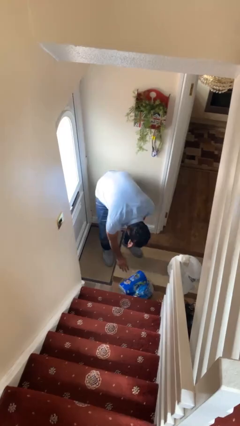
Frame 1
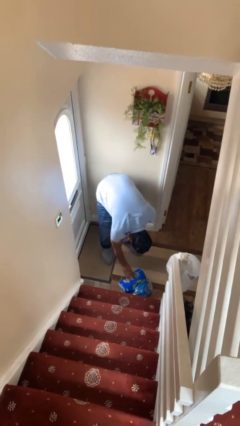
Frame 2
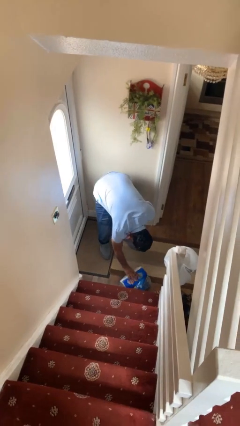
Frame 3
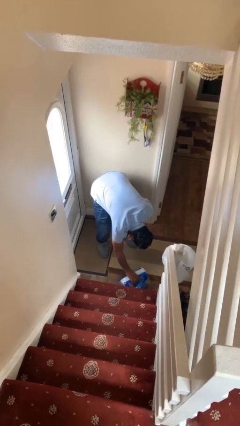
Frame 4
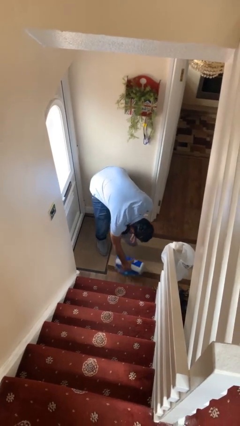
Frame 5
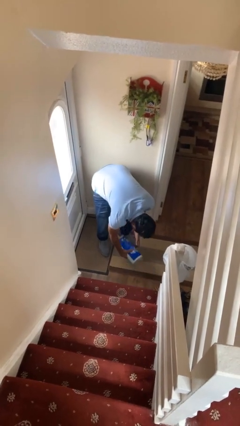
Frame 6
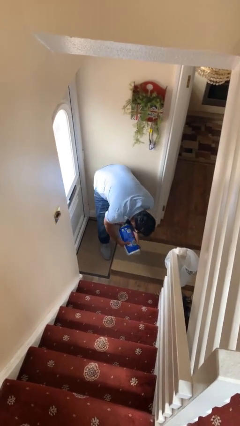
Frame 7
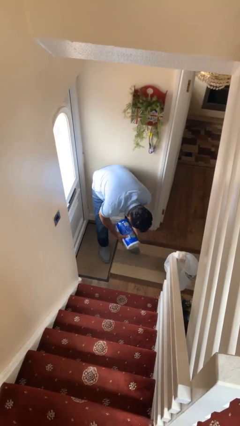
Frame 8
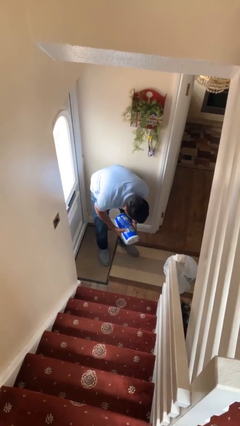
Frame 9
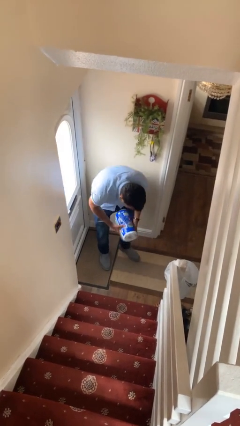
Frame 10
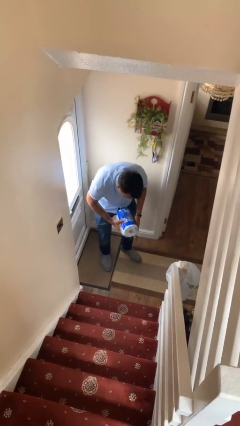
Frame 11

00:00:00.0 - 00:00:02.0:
person picks up object from floor

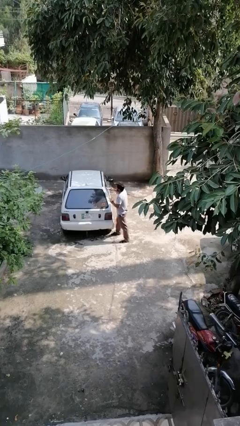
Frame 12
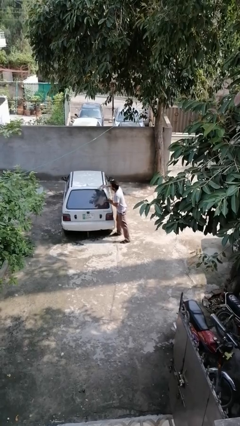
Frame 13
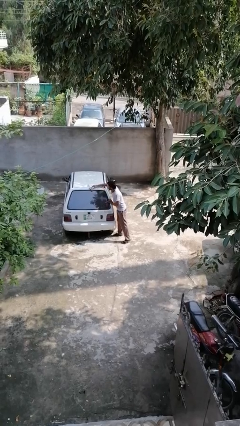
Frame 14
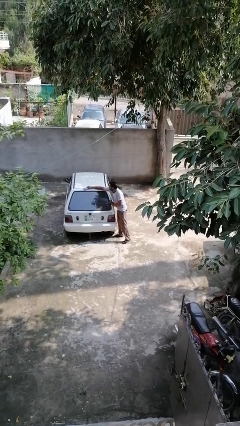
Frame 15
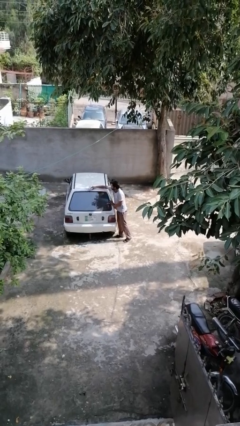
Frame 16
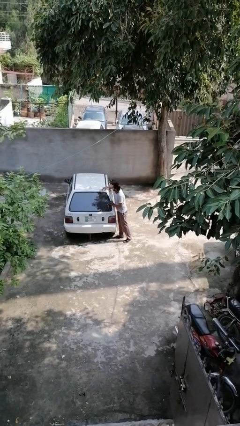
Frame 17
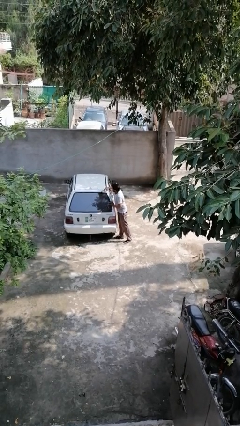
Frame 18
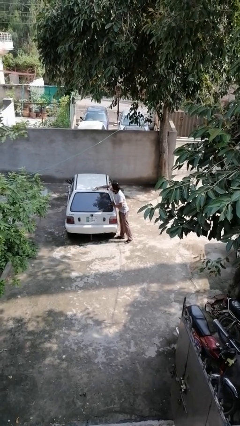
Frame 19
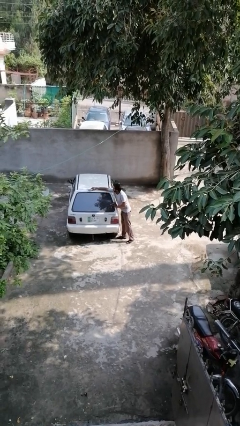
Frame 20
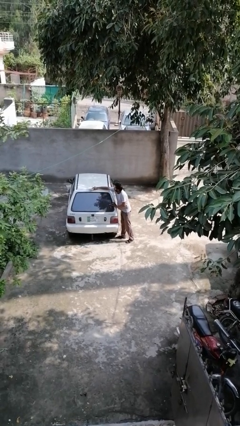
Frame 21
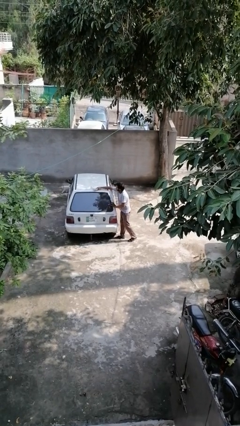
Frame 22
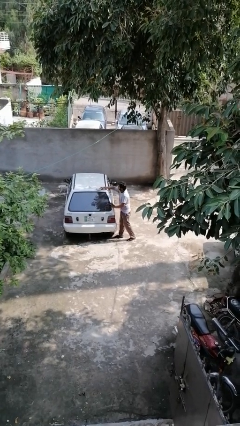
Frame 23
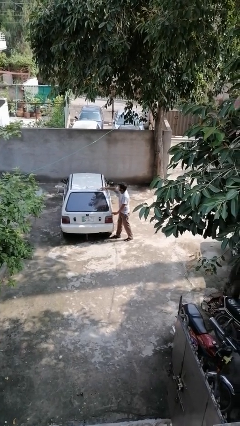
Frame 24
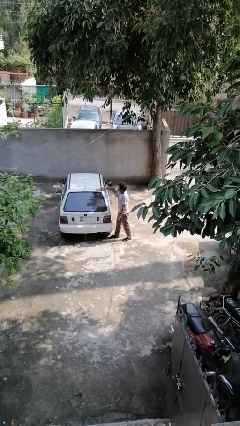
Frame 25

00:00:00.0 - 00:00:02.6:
person polishes car with rag

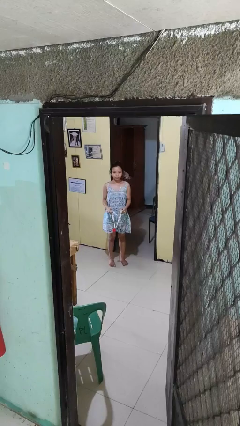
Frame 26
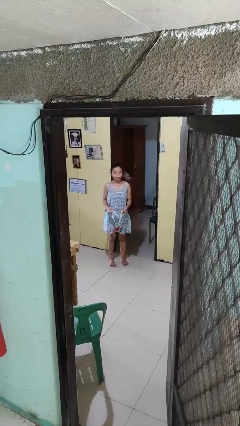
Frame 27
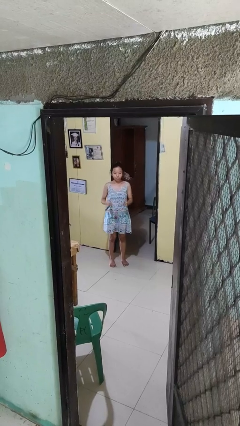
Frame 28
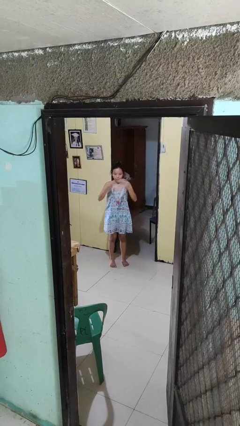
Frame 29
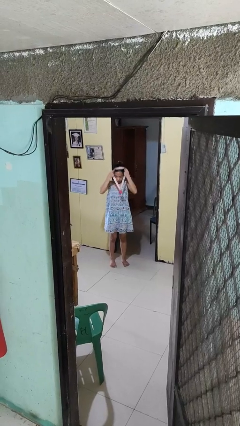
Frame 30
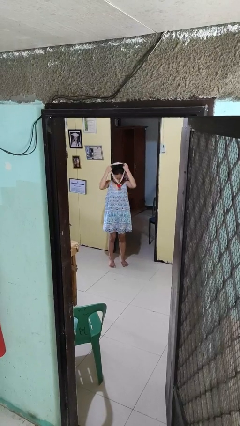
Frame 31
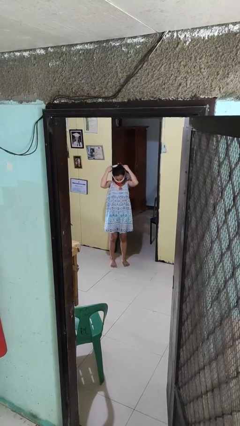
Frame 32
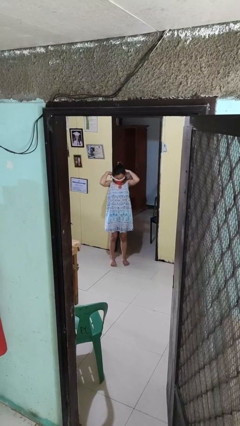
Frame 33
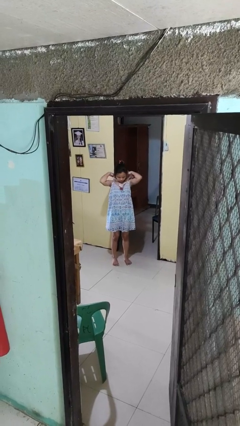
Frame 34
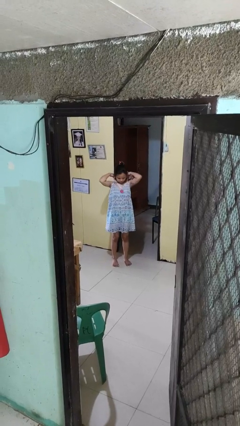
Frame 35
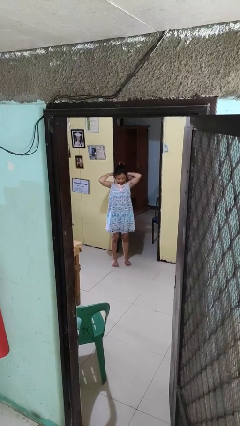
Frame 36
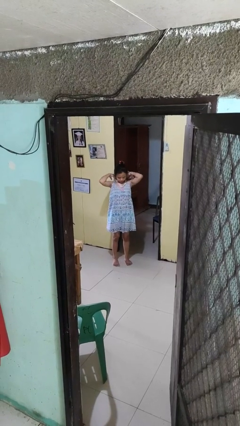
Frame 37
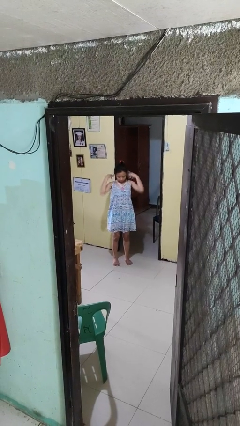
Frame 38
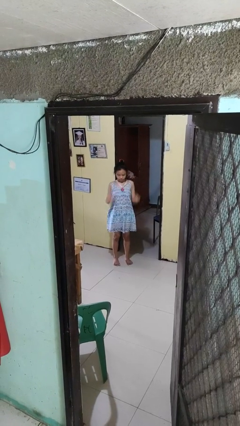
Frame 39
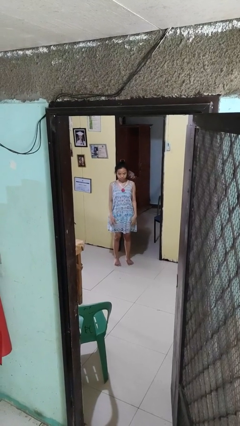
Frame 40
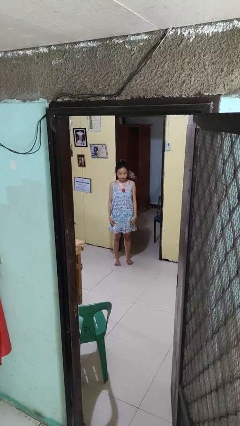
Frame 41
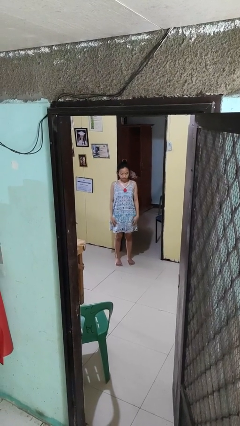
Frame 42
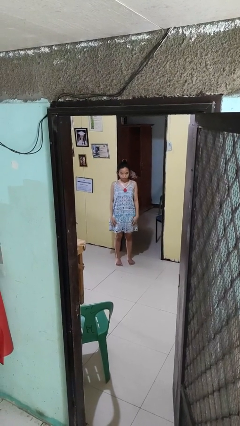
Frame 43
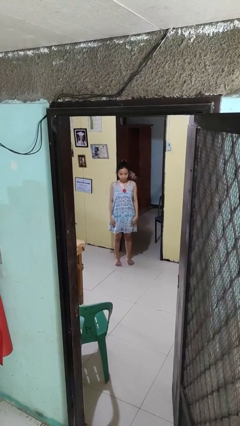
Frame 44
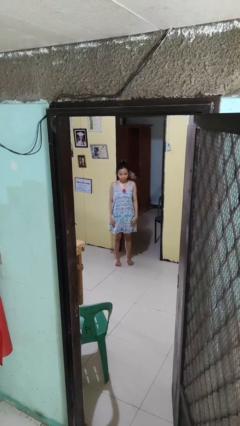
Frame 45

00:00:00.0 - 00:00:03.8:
person puts on necklace

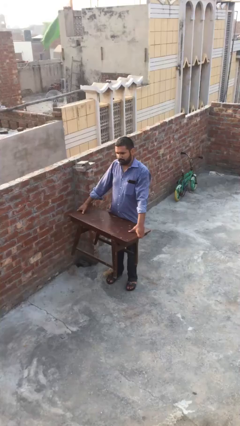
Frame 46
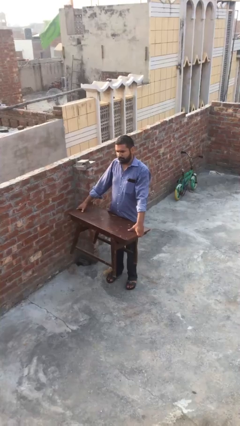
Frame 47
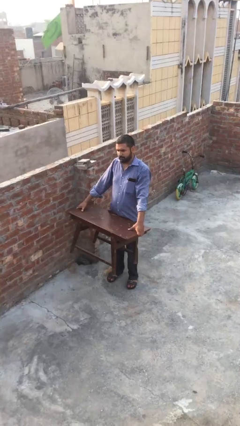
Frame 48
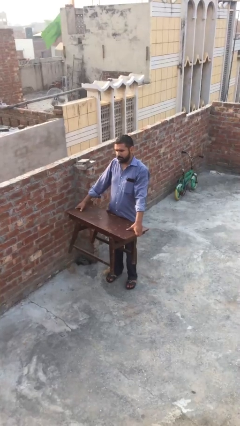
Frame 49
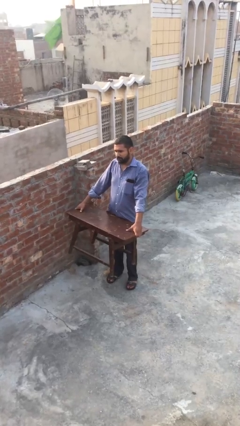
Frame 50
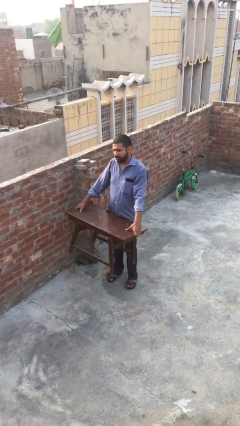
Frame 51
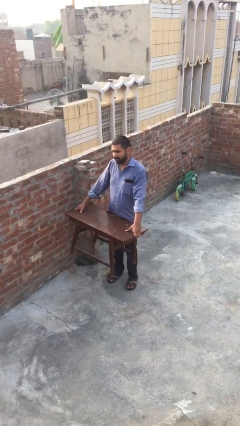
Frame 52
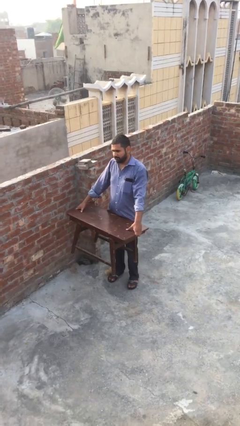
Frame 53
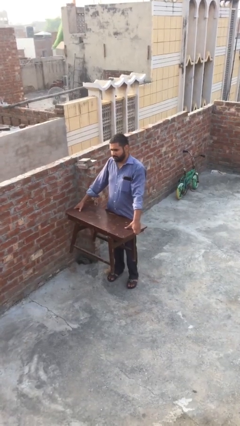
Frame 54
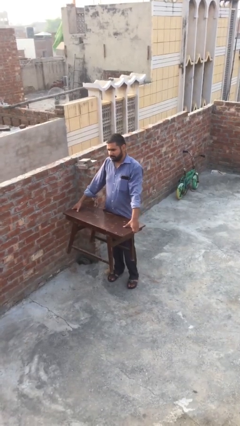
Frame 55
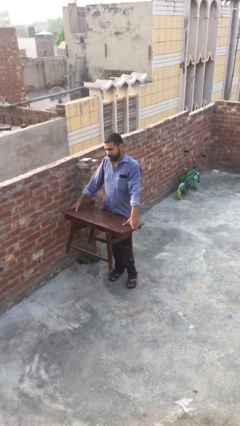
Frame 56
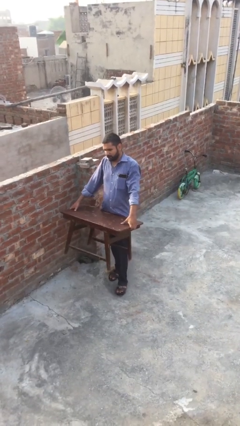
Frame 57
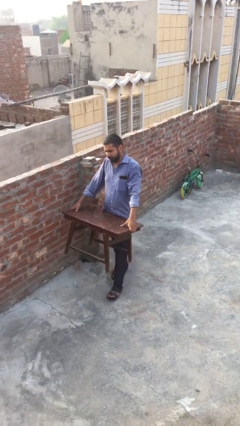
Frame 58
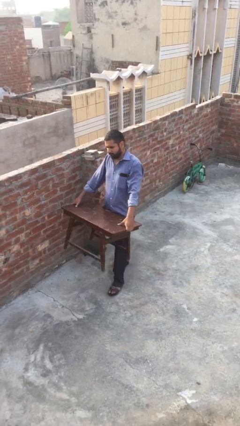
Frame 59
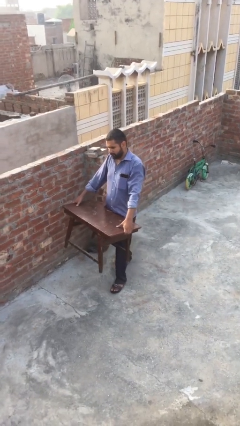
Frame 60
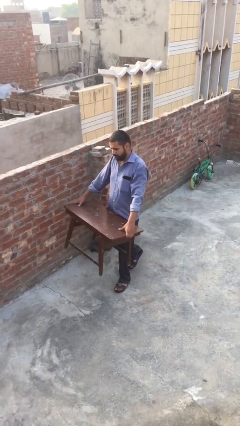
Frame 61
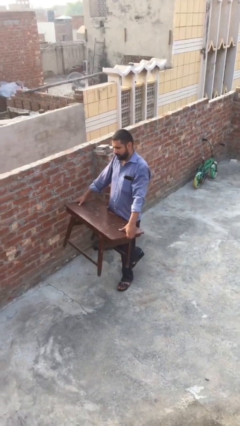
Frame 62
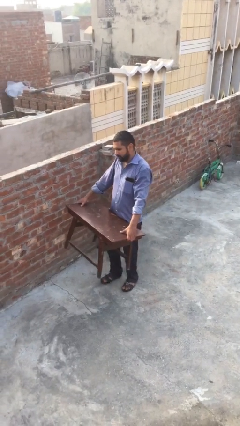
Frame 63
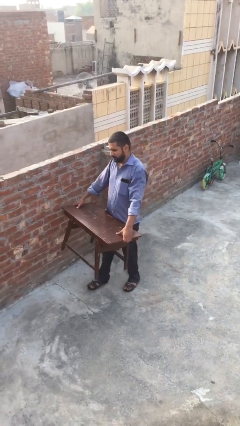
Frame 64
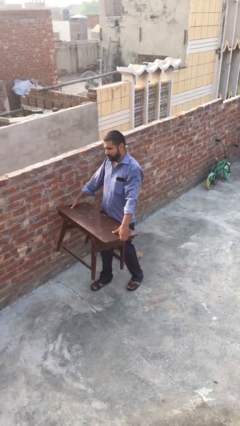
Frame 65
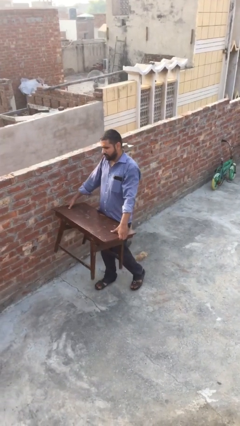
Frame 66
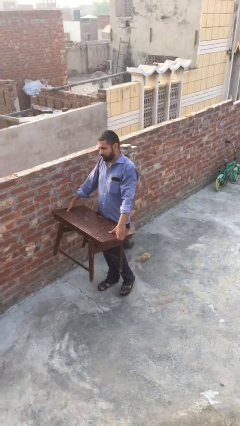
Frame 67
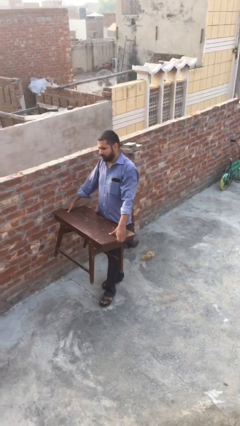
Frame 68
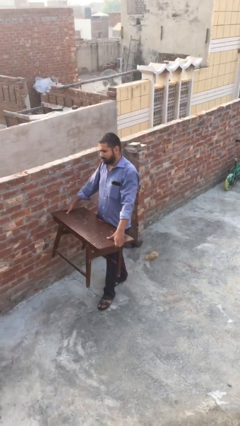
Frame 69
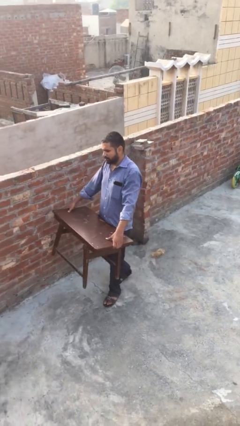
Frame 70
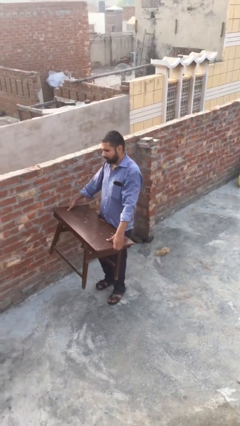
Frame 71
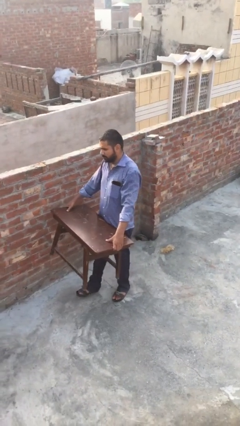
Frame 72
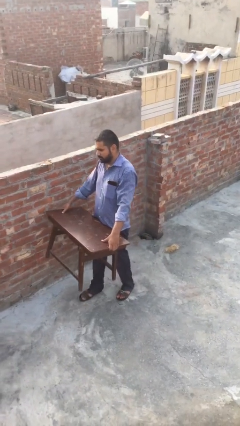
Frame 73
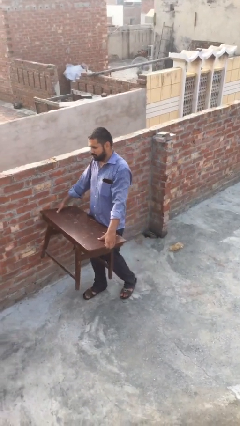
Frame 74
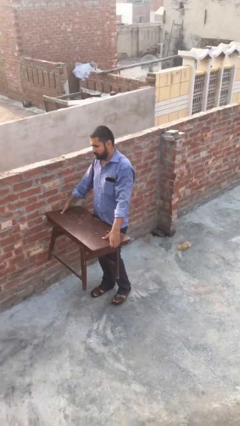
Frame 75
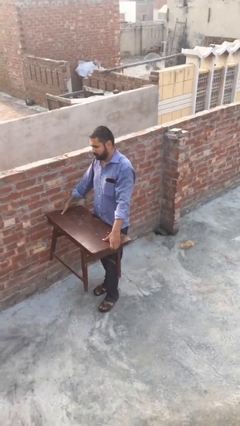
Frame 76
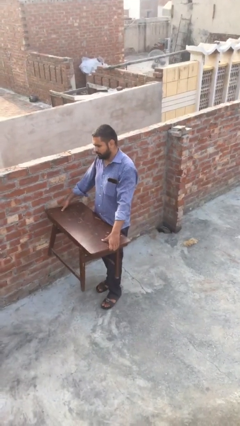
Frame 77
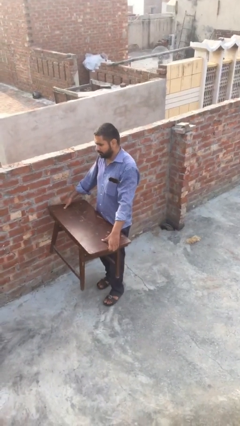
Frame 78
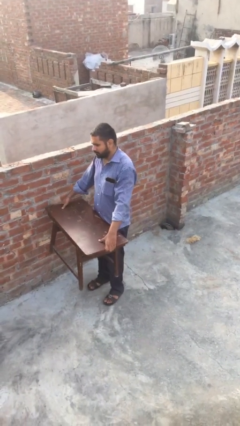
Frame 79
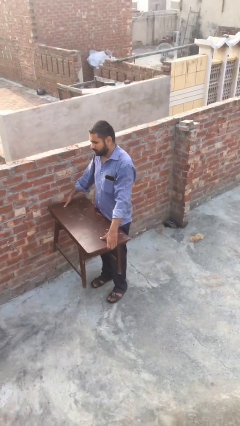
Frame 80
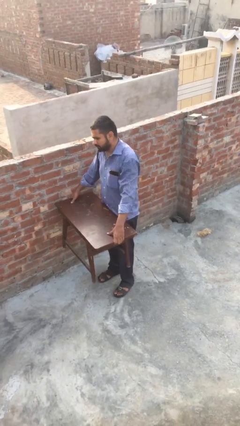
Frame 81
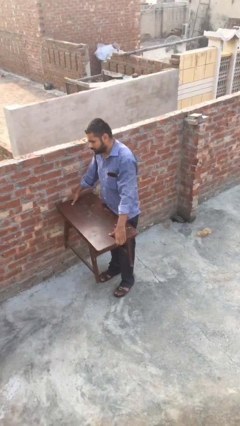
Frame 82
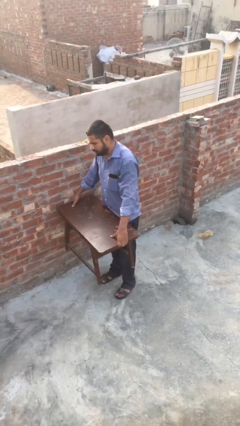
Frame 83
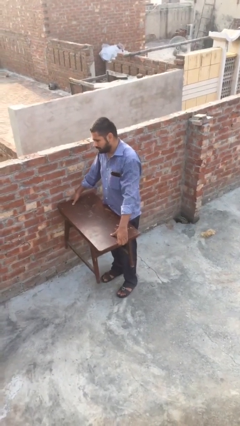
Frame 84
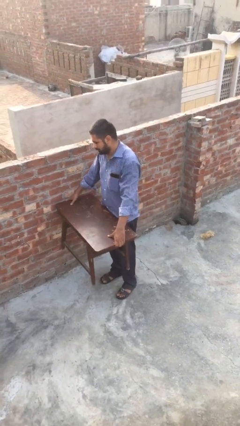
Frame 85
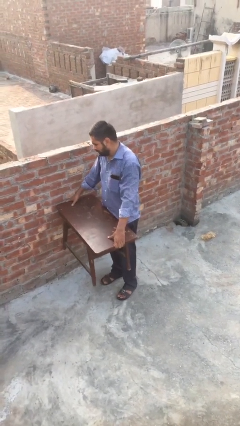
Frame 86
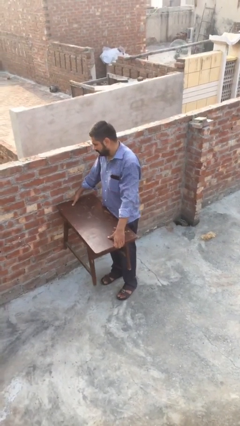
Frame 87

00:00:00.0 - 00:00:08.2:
person carries heavy object

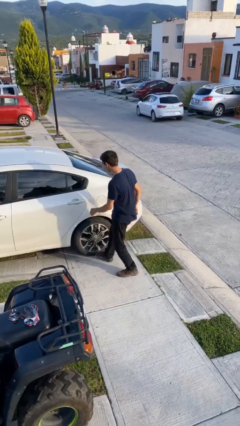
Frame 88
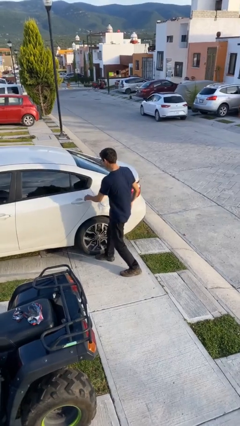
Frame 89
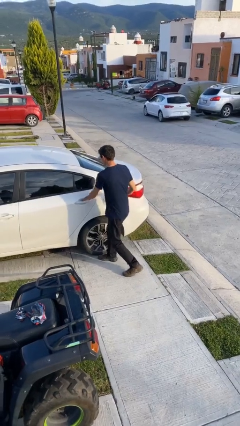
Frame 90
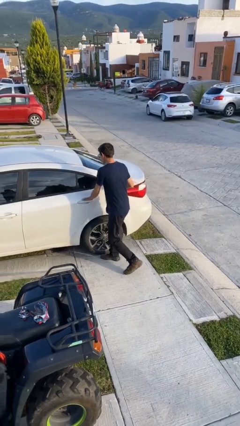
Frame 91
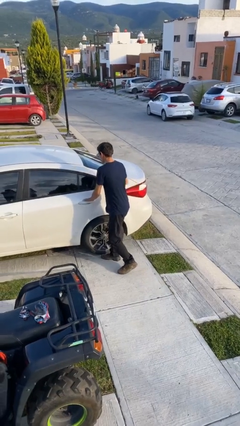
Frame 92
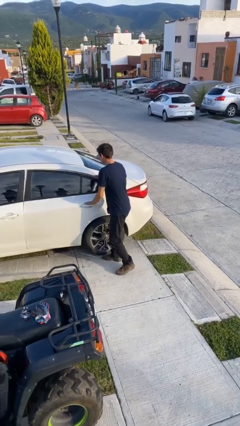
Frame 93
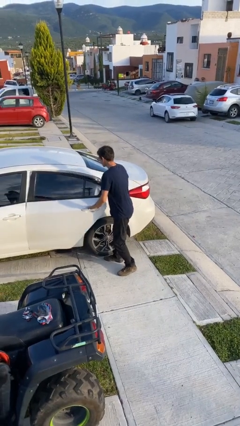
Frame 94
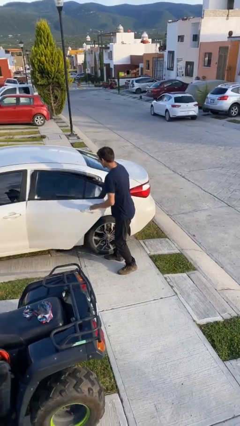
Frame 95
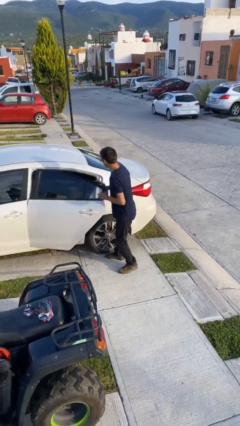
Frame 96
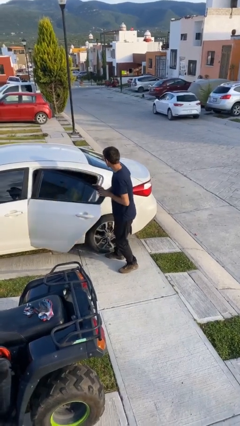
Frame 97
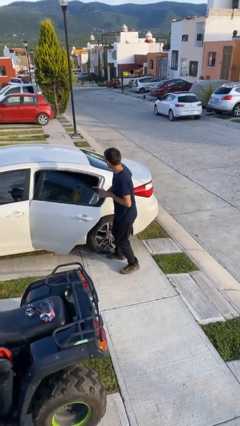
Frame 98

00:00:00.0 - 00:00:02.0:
person opens car door
